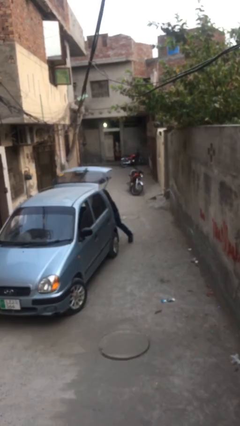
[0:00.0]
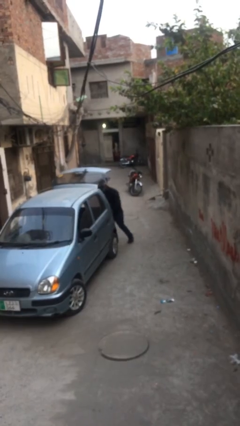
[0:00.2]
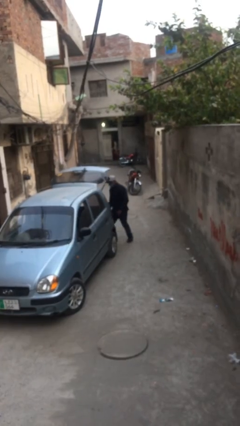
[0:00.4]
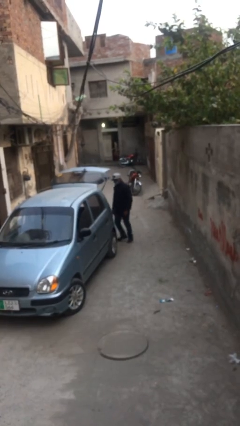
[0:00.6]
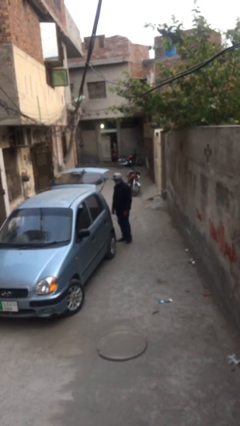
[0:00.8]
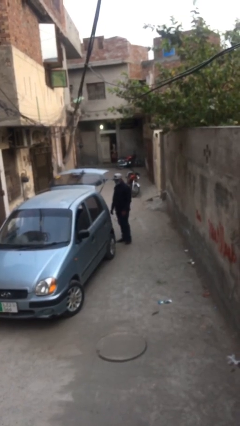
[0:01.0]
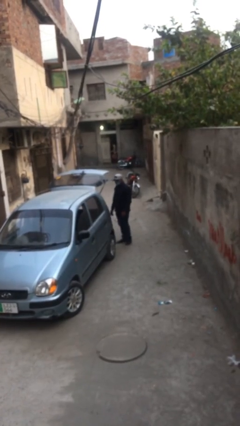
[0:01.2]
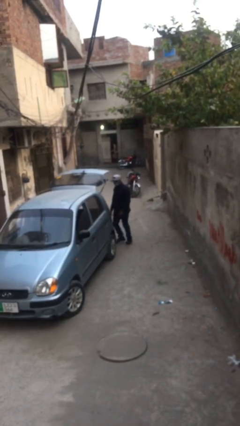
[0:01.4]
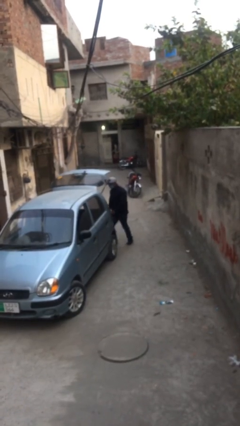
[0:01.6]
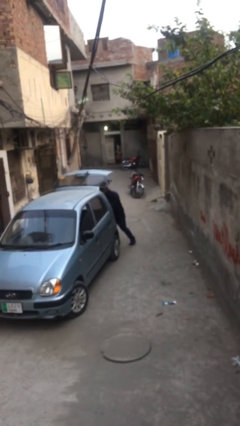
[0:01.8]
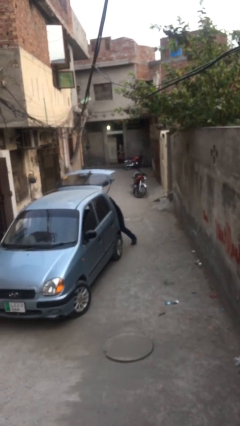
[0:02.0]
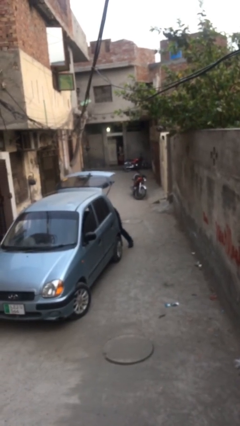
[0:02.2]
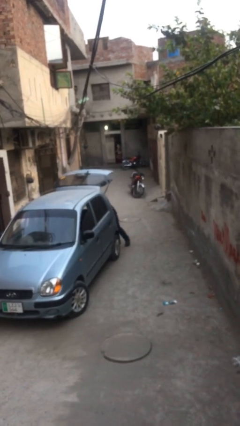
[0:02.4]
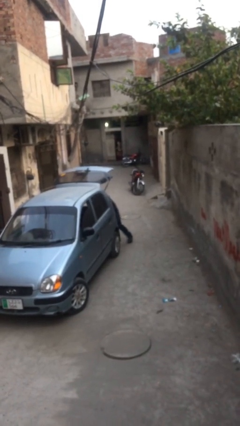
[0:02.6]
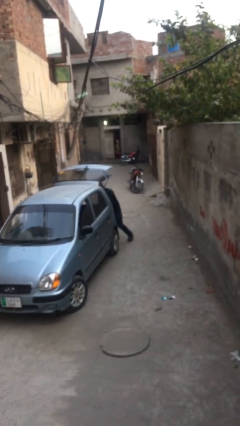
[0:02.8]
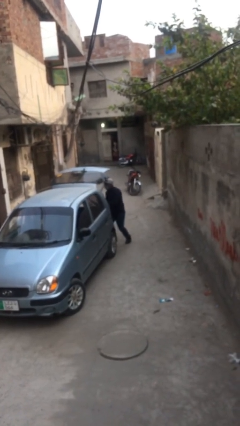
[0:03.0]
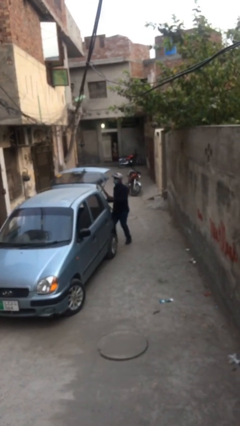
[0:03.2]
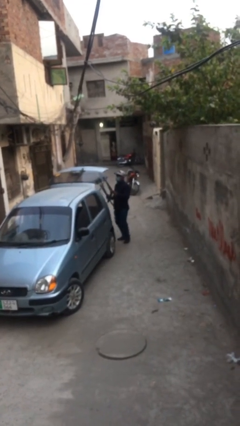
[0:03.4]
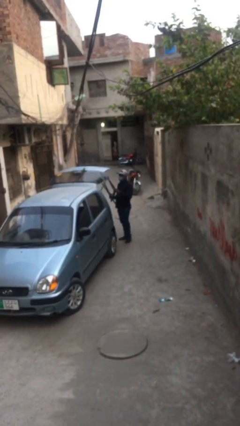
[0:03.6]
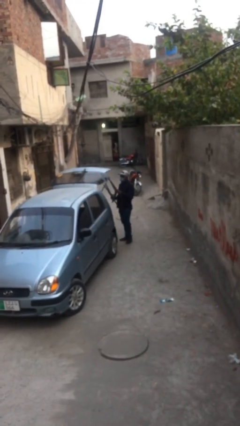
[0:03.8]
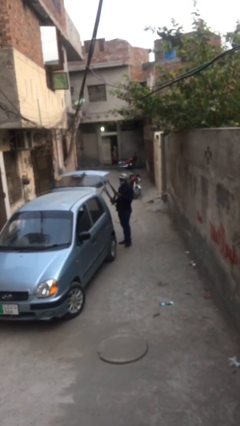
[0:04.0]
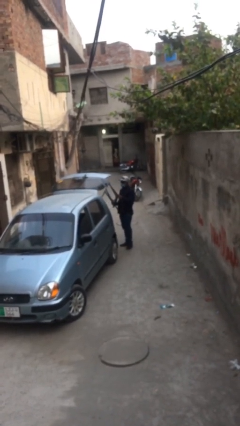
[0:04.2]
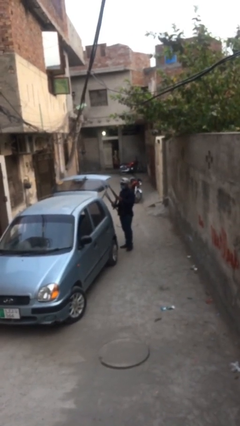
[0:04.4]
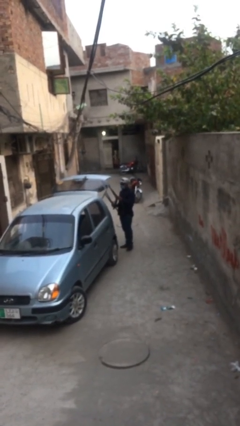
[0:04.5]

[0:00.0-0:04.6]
person unloads car

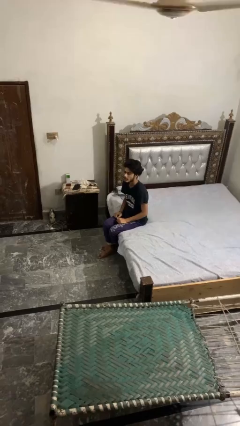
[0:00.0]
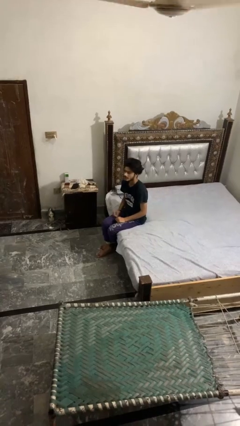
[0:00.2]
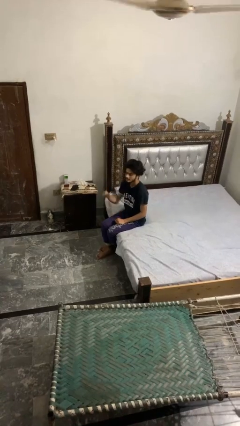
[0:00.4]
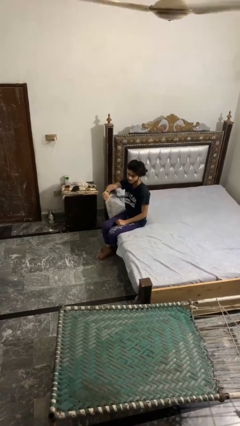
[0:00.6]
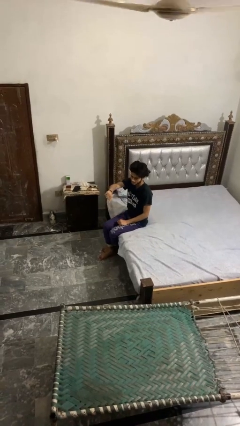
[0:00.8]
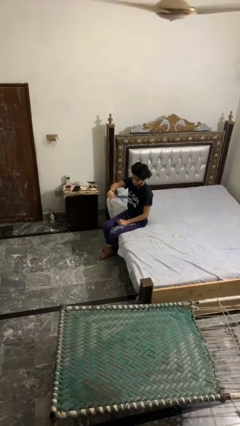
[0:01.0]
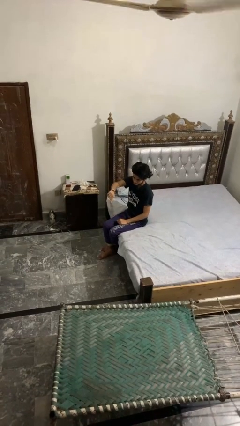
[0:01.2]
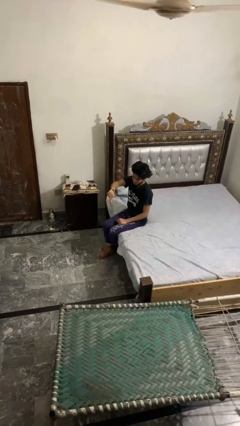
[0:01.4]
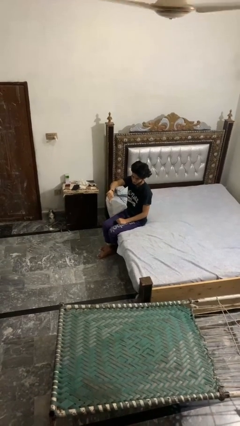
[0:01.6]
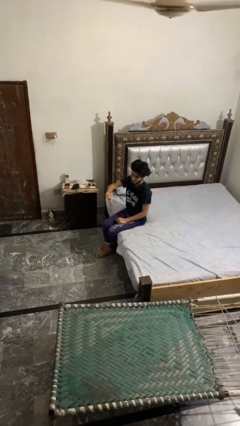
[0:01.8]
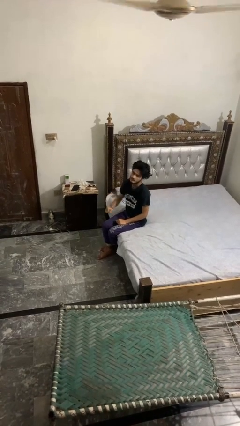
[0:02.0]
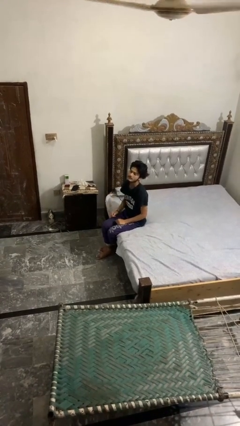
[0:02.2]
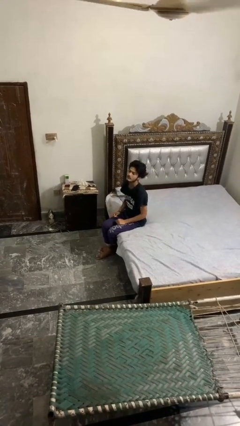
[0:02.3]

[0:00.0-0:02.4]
person gestures thumbs down

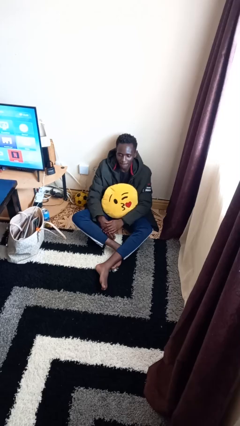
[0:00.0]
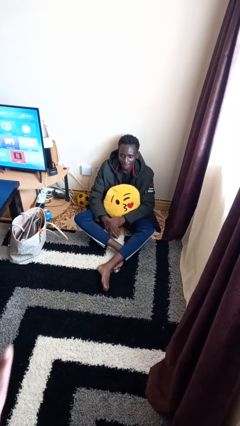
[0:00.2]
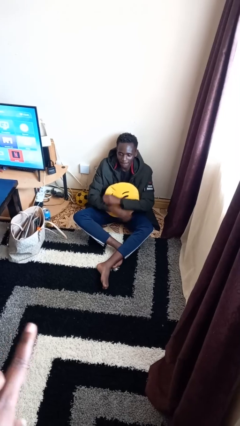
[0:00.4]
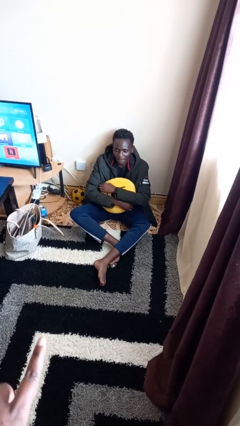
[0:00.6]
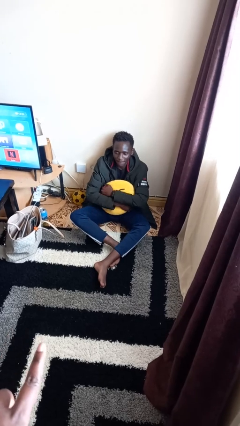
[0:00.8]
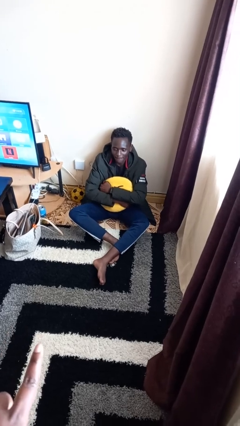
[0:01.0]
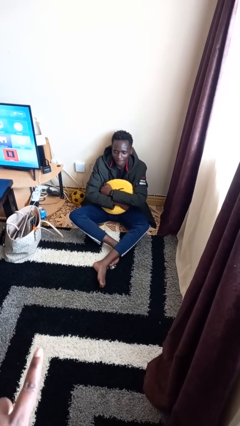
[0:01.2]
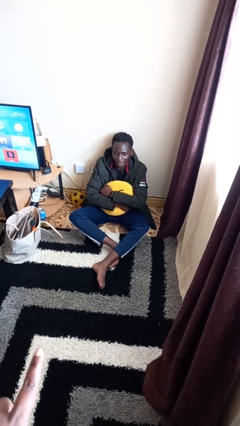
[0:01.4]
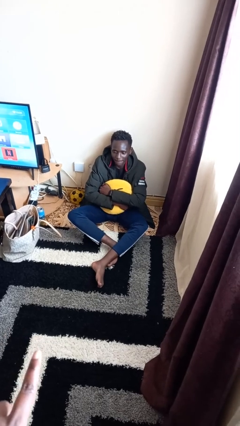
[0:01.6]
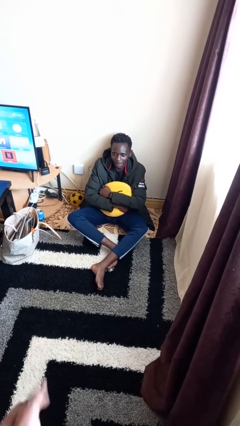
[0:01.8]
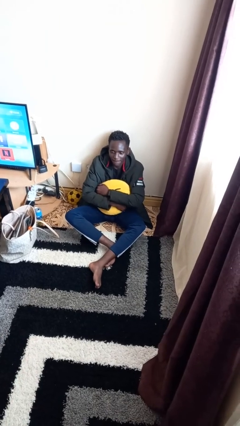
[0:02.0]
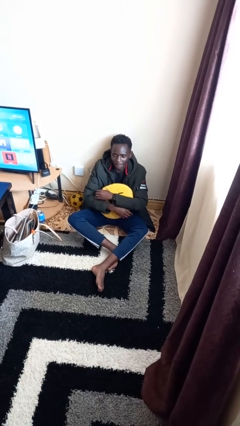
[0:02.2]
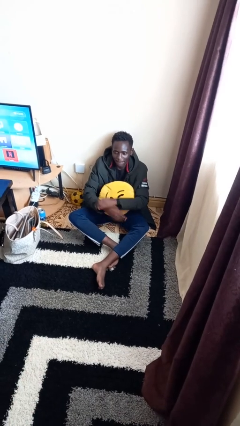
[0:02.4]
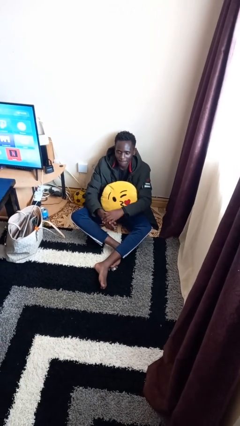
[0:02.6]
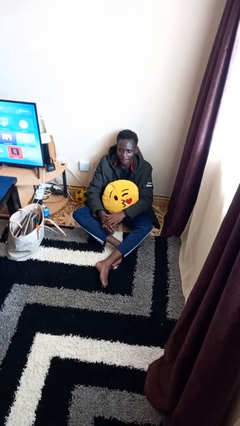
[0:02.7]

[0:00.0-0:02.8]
person hugs stuffed animal

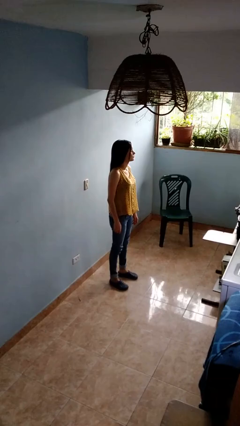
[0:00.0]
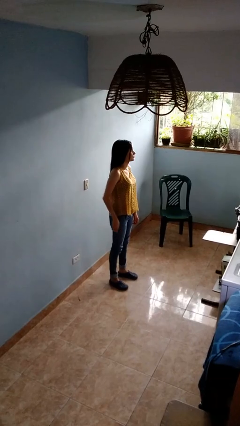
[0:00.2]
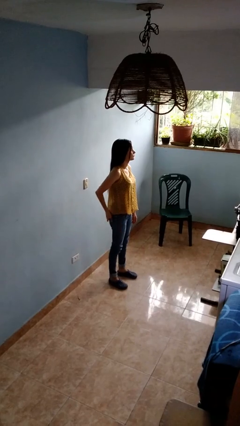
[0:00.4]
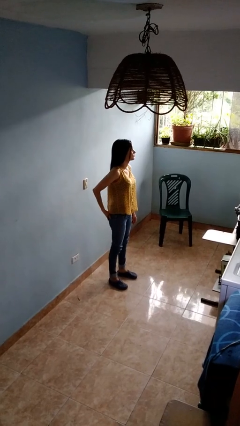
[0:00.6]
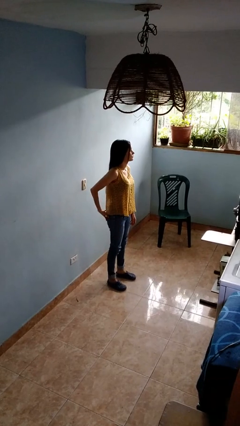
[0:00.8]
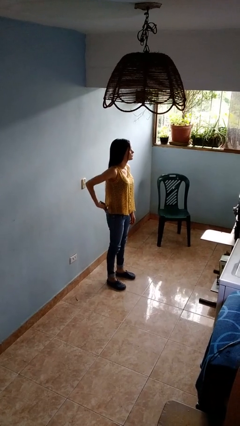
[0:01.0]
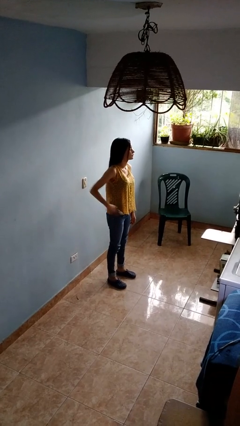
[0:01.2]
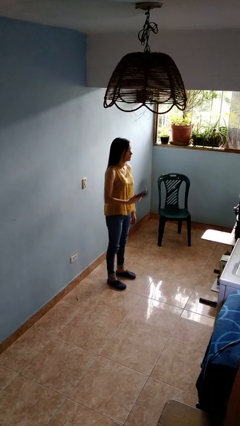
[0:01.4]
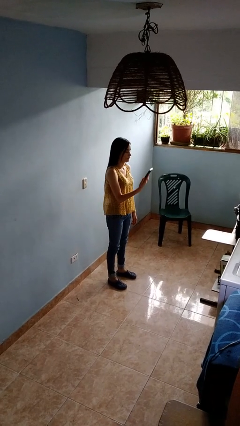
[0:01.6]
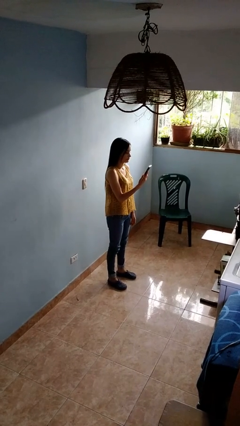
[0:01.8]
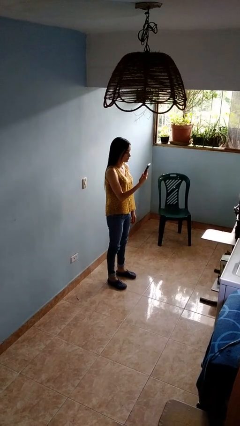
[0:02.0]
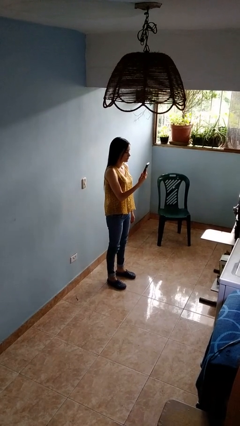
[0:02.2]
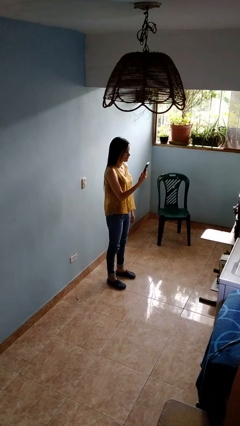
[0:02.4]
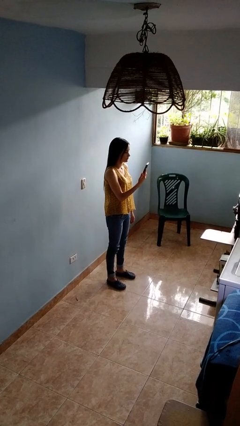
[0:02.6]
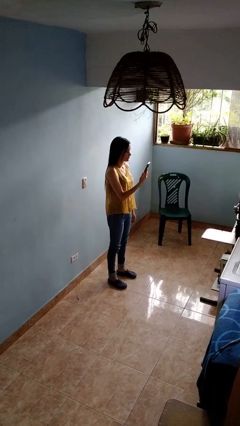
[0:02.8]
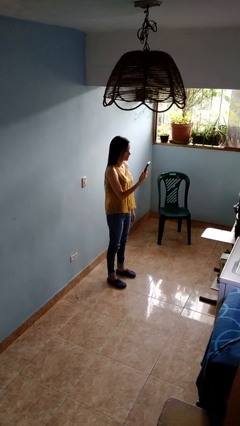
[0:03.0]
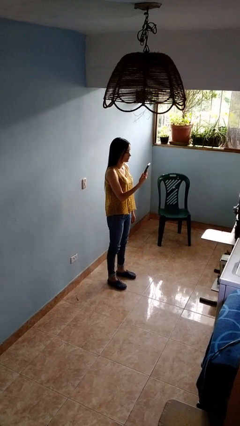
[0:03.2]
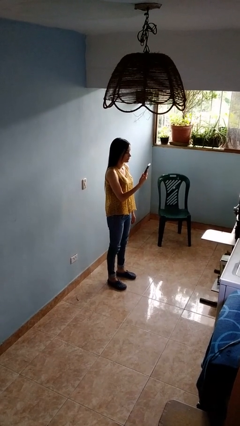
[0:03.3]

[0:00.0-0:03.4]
person takes phone from pocket

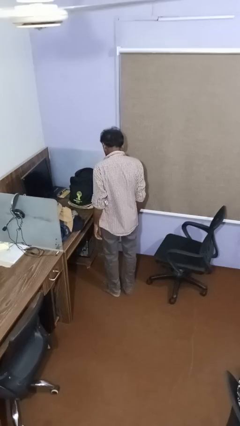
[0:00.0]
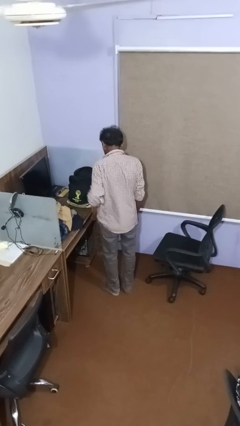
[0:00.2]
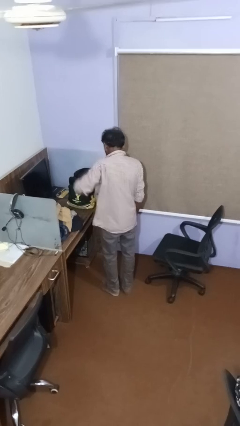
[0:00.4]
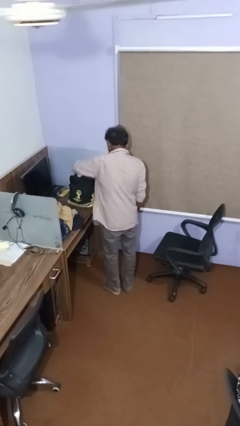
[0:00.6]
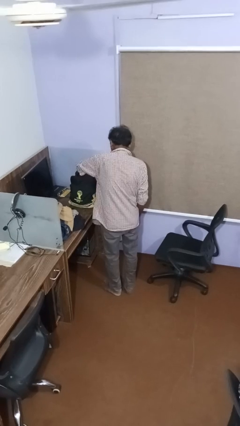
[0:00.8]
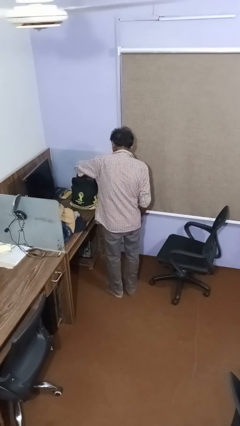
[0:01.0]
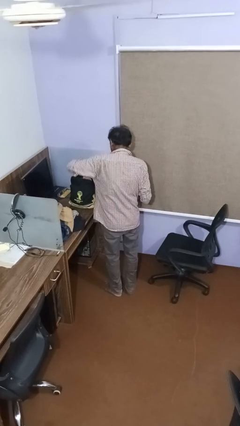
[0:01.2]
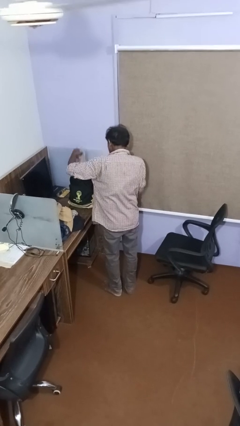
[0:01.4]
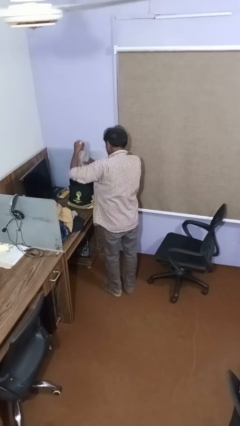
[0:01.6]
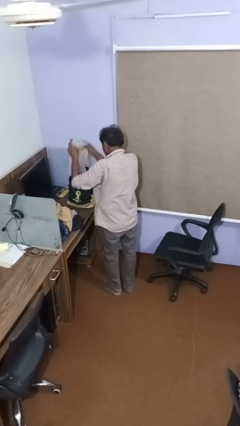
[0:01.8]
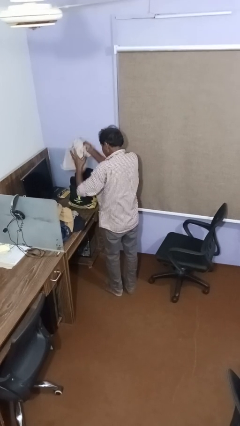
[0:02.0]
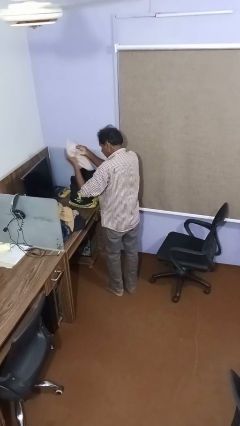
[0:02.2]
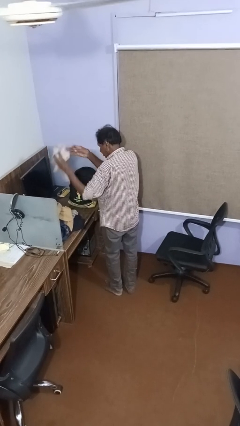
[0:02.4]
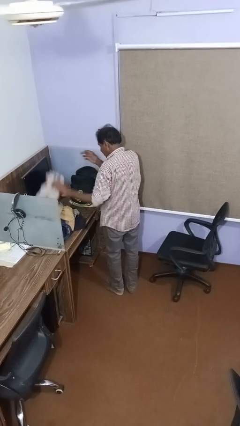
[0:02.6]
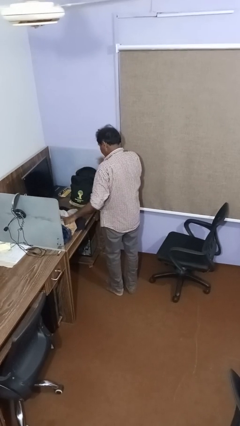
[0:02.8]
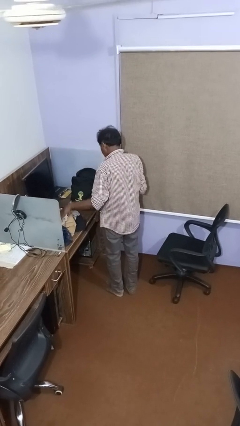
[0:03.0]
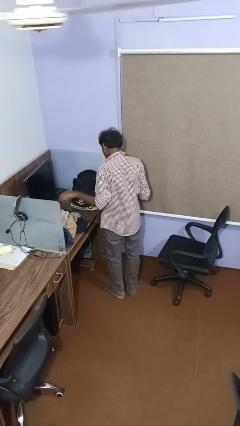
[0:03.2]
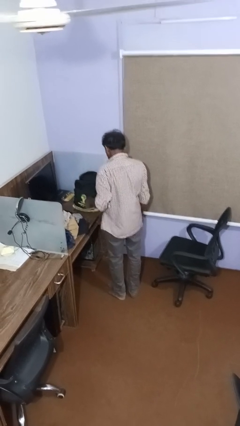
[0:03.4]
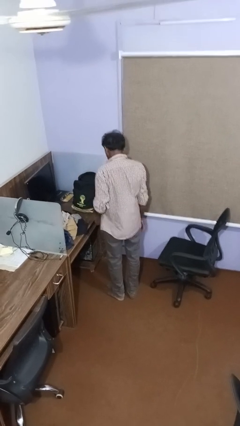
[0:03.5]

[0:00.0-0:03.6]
person unloads clothes from suitcase

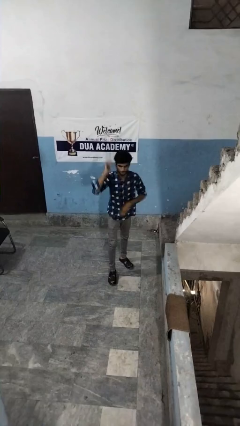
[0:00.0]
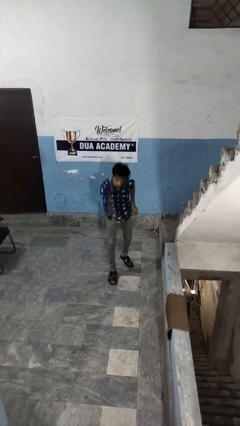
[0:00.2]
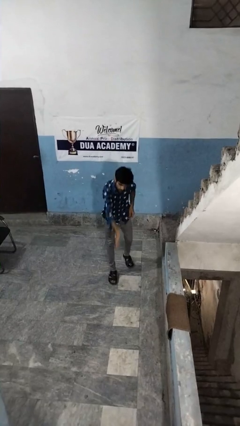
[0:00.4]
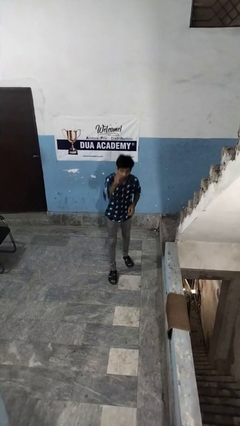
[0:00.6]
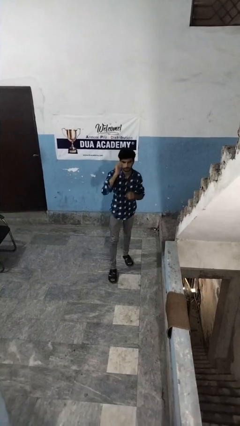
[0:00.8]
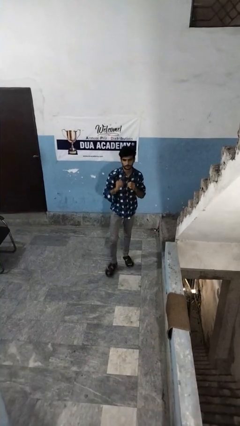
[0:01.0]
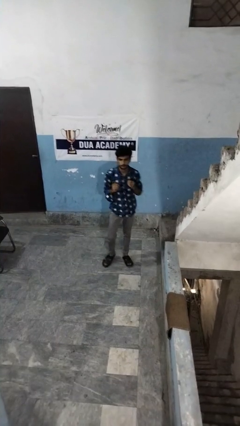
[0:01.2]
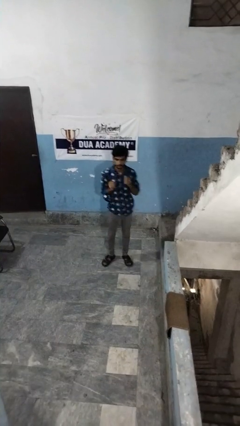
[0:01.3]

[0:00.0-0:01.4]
person karate chop
